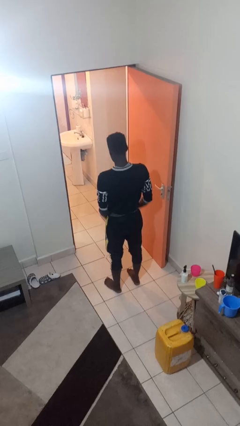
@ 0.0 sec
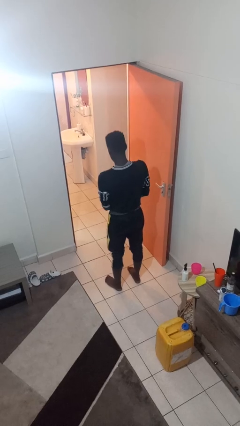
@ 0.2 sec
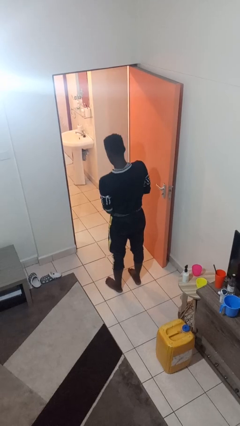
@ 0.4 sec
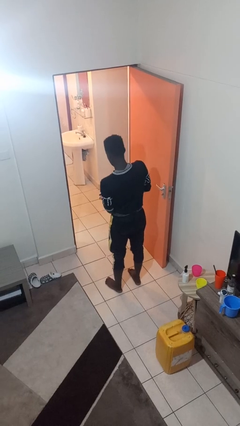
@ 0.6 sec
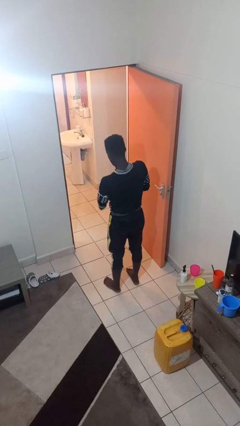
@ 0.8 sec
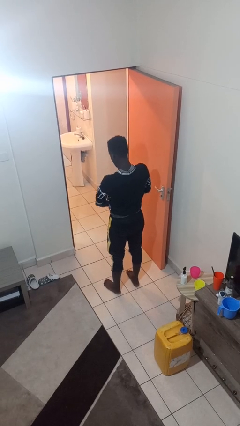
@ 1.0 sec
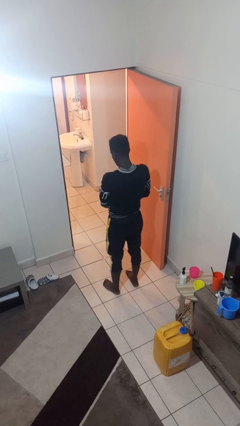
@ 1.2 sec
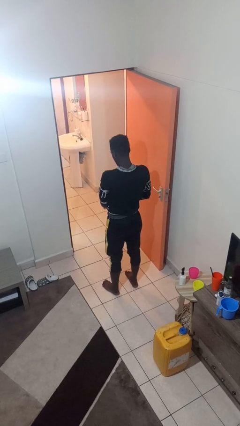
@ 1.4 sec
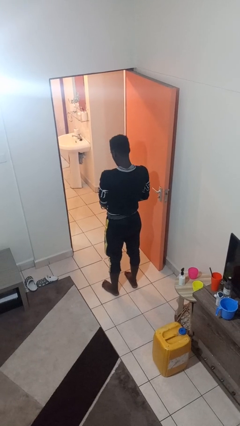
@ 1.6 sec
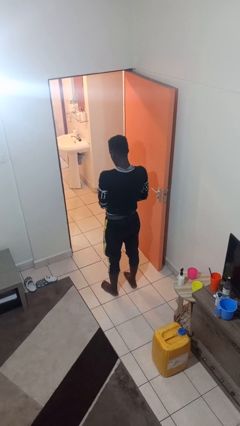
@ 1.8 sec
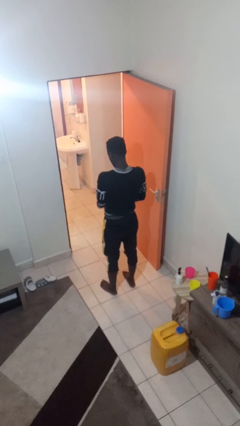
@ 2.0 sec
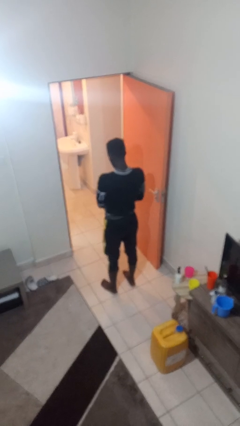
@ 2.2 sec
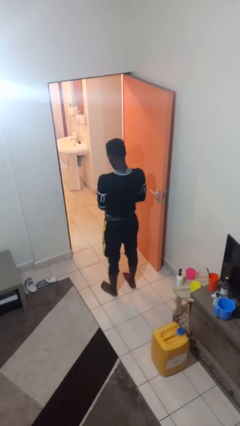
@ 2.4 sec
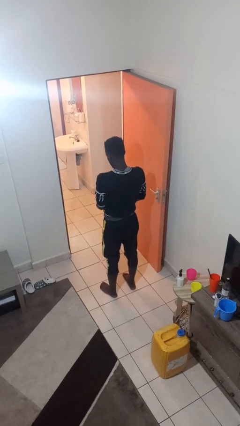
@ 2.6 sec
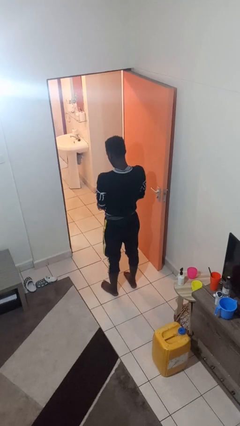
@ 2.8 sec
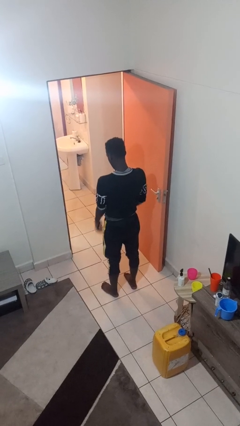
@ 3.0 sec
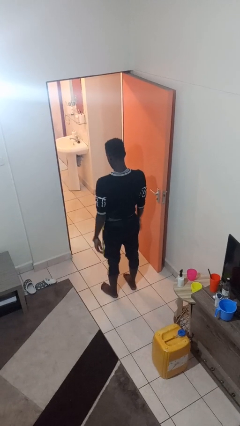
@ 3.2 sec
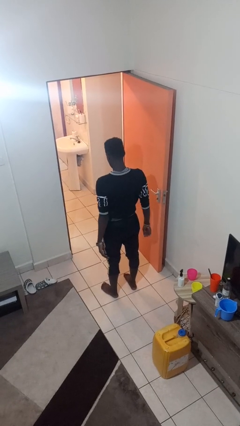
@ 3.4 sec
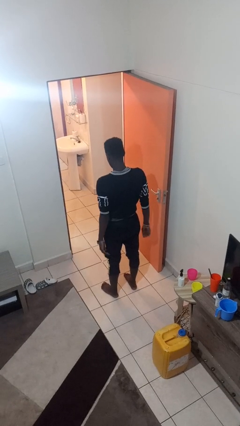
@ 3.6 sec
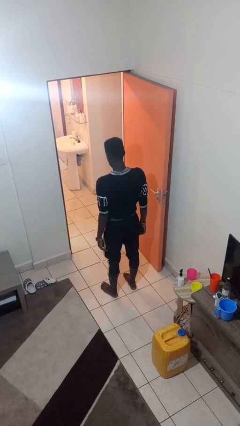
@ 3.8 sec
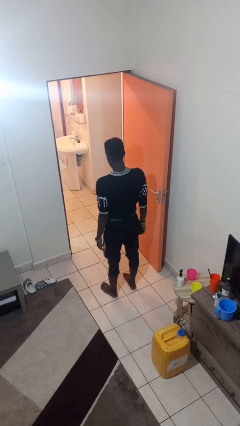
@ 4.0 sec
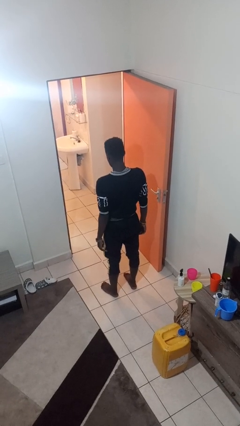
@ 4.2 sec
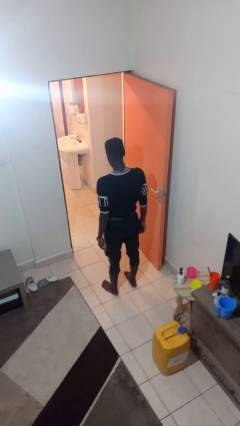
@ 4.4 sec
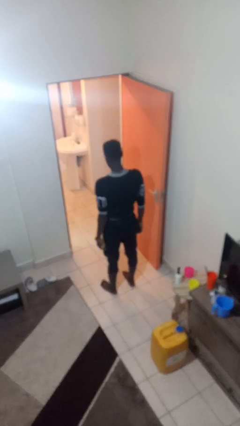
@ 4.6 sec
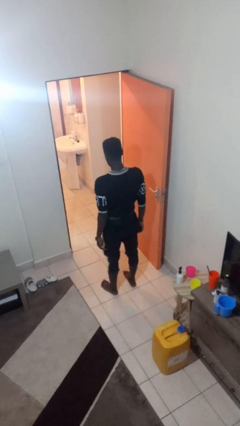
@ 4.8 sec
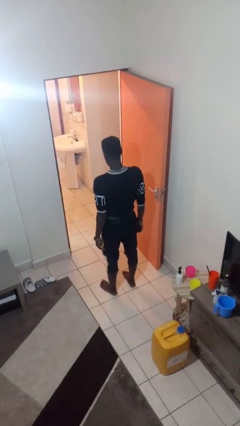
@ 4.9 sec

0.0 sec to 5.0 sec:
person puts on wristwatch

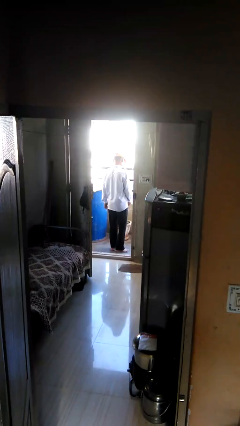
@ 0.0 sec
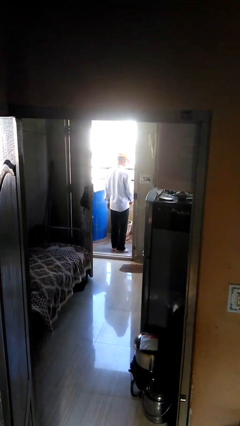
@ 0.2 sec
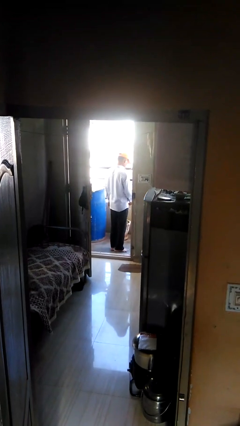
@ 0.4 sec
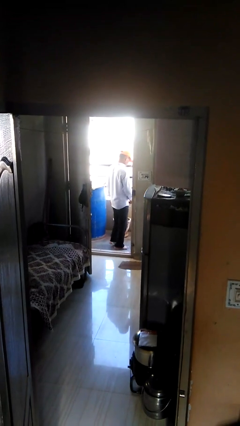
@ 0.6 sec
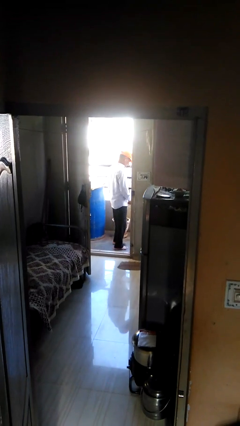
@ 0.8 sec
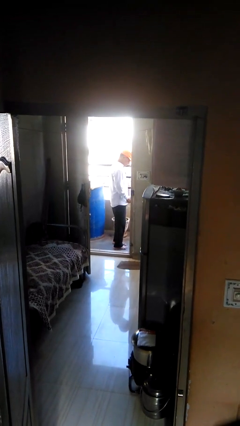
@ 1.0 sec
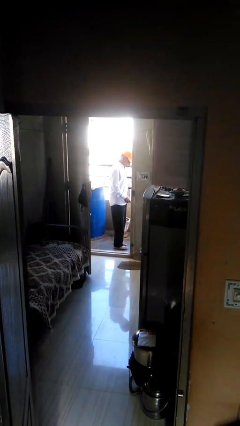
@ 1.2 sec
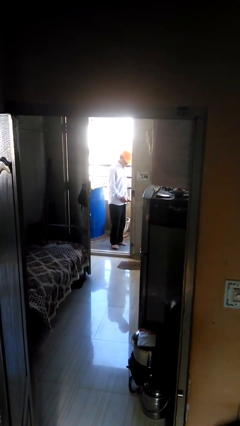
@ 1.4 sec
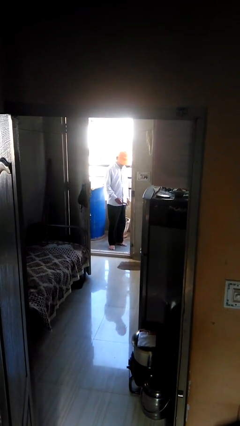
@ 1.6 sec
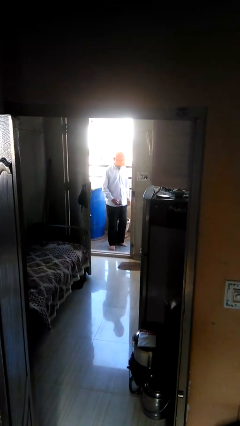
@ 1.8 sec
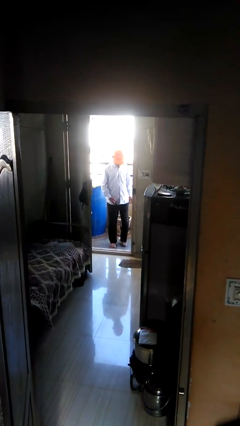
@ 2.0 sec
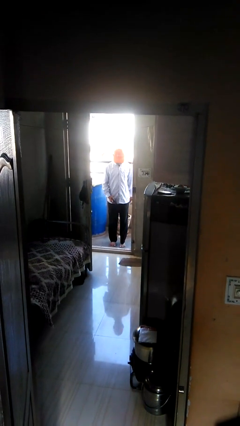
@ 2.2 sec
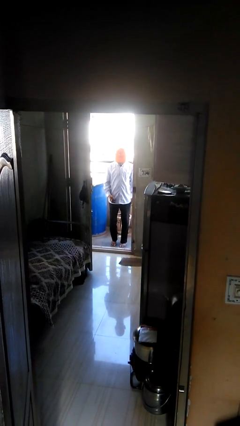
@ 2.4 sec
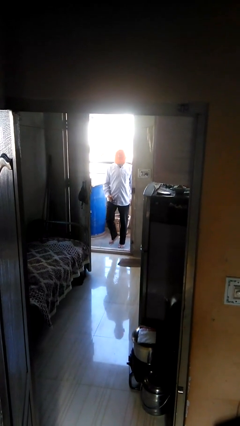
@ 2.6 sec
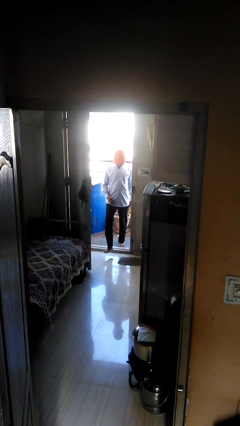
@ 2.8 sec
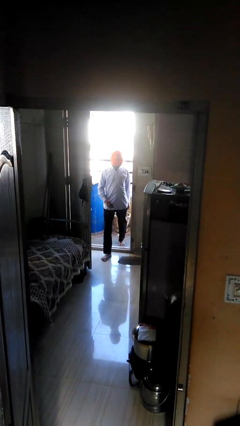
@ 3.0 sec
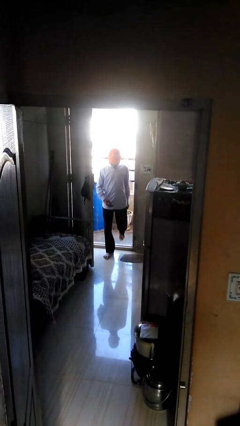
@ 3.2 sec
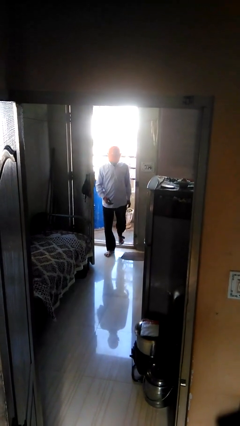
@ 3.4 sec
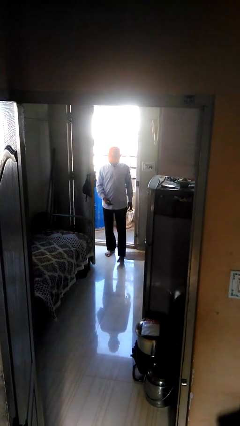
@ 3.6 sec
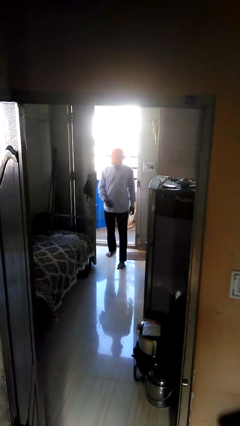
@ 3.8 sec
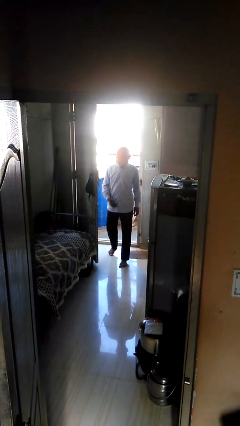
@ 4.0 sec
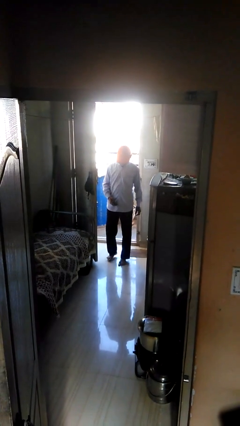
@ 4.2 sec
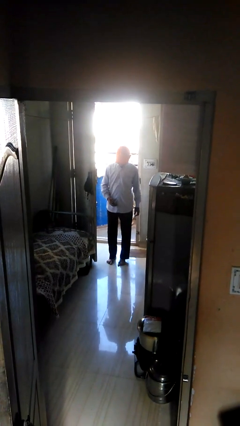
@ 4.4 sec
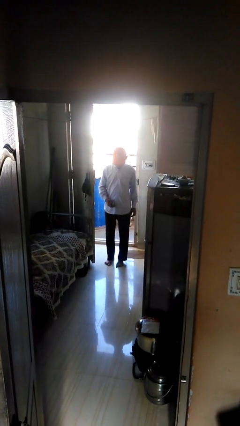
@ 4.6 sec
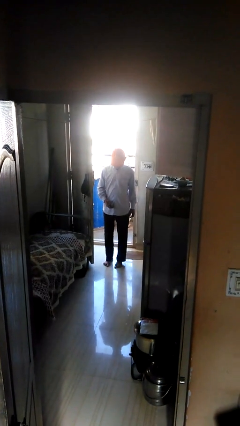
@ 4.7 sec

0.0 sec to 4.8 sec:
person enters scene through structure

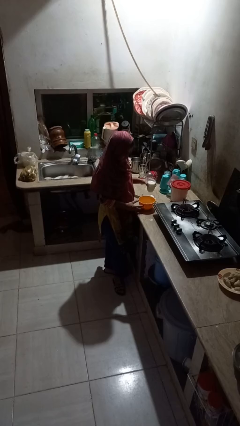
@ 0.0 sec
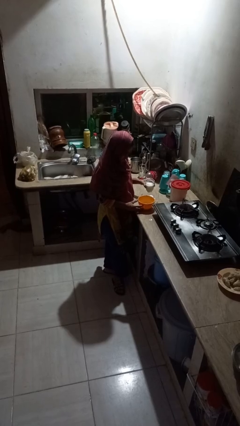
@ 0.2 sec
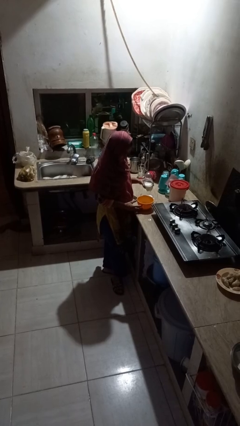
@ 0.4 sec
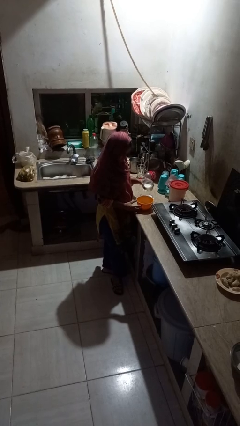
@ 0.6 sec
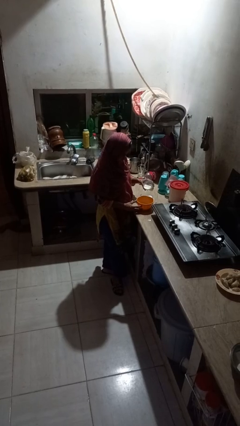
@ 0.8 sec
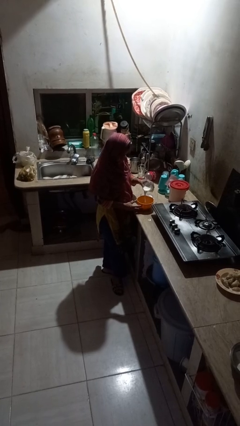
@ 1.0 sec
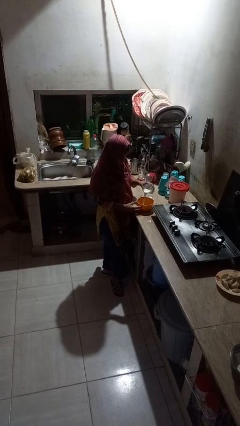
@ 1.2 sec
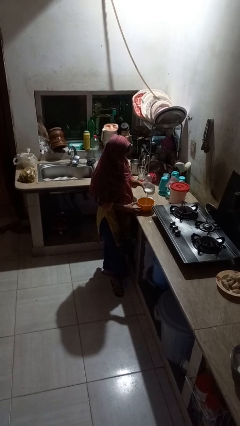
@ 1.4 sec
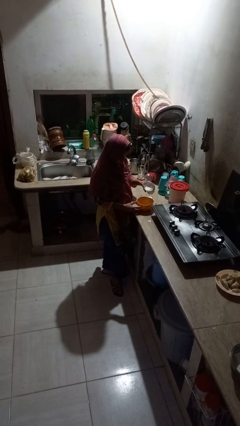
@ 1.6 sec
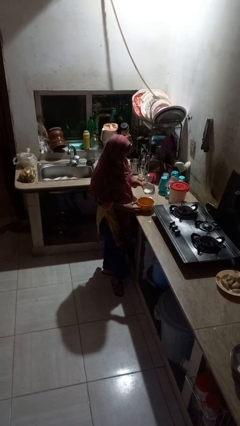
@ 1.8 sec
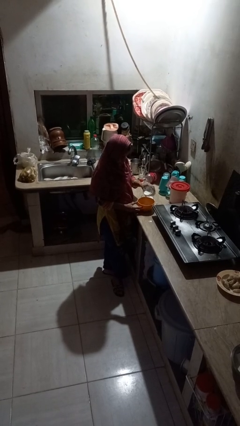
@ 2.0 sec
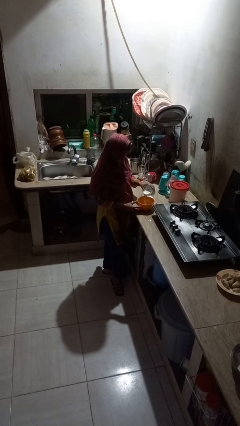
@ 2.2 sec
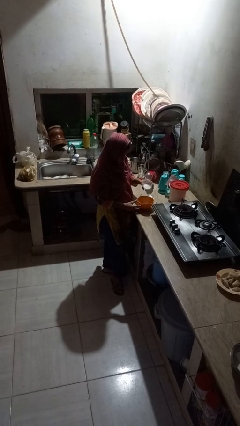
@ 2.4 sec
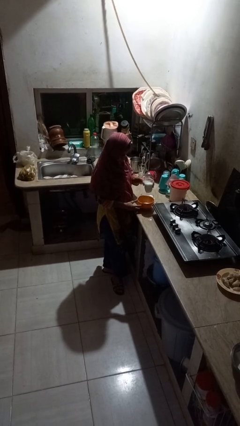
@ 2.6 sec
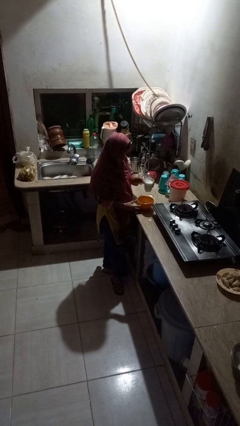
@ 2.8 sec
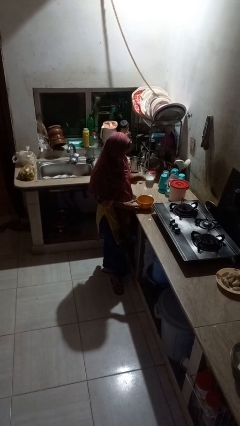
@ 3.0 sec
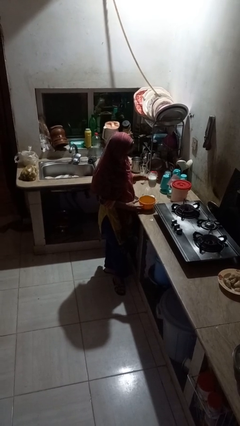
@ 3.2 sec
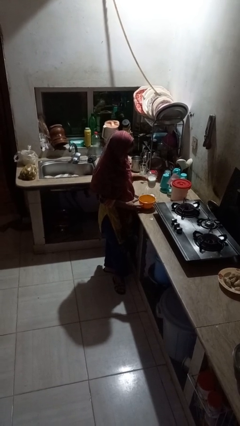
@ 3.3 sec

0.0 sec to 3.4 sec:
person pours into bowl

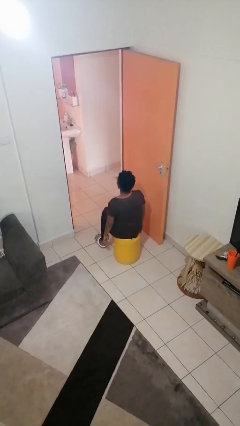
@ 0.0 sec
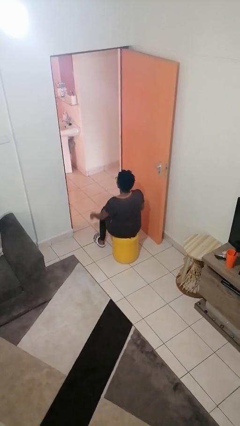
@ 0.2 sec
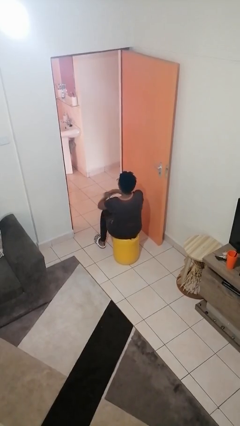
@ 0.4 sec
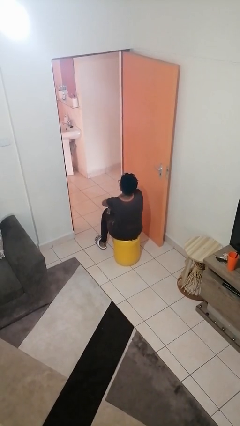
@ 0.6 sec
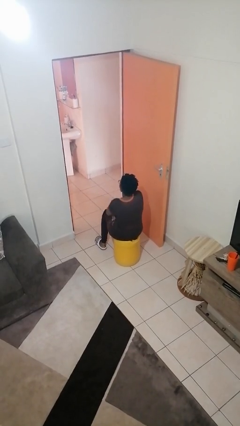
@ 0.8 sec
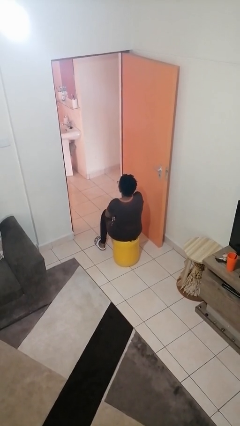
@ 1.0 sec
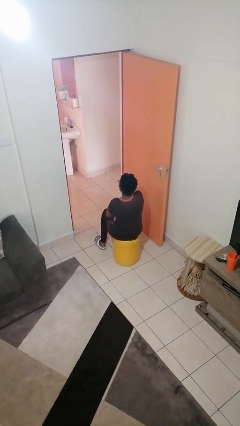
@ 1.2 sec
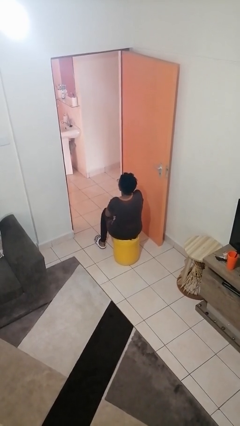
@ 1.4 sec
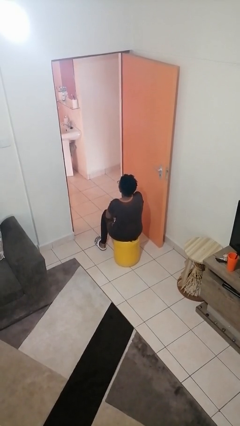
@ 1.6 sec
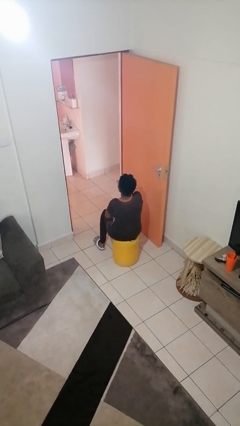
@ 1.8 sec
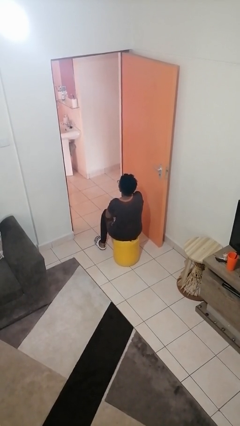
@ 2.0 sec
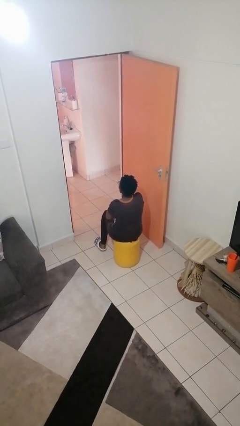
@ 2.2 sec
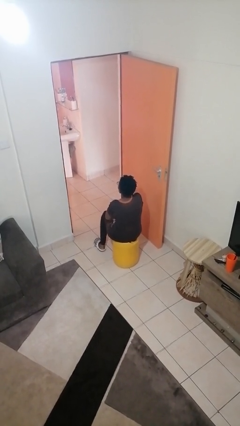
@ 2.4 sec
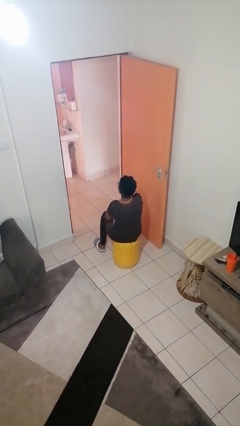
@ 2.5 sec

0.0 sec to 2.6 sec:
person crosses arms

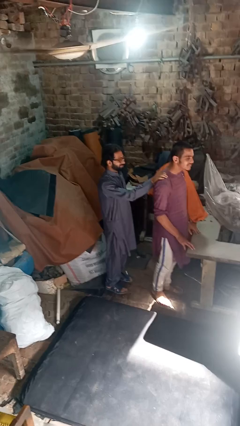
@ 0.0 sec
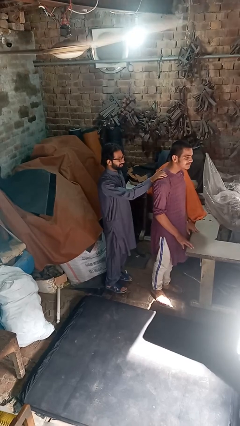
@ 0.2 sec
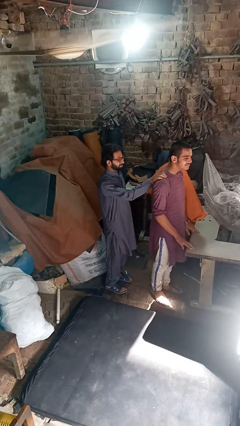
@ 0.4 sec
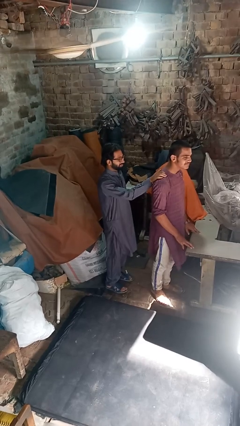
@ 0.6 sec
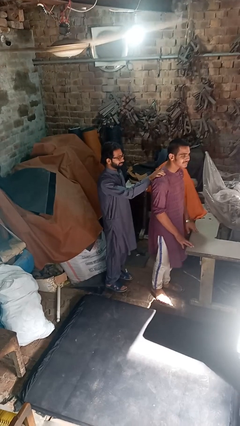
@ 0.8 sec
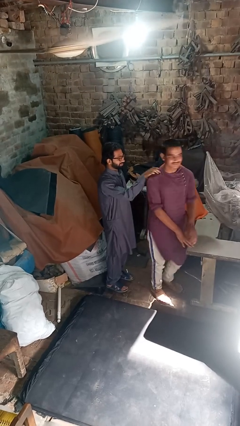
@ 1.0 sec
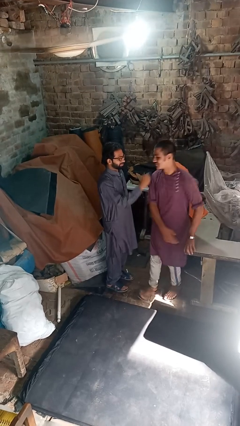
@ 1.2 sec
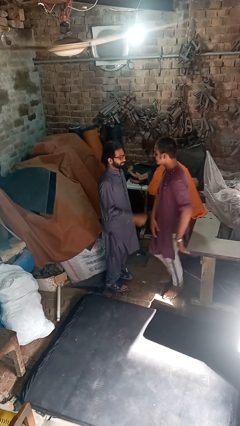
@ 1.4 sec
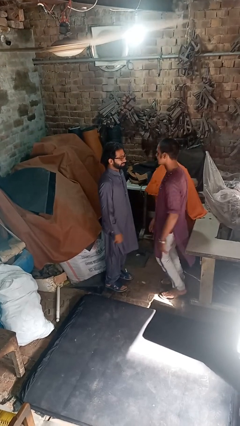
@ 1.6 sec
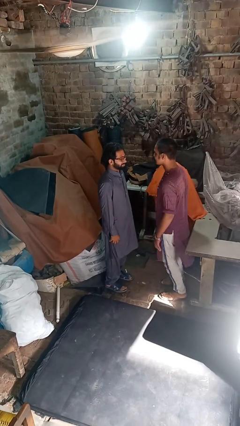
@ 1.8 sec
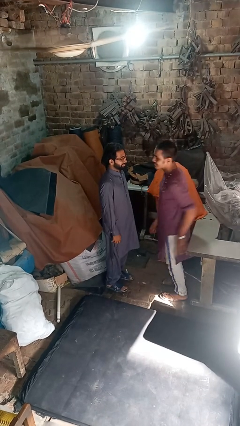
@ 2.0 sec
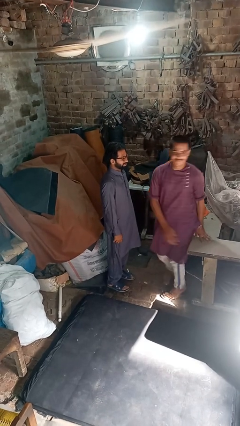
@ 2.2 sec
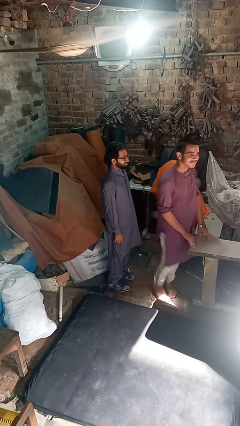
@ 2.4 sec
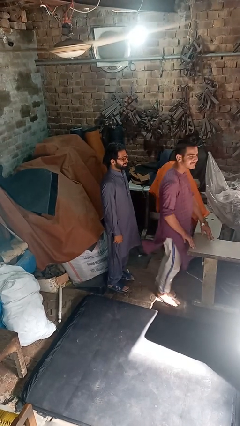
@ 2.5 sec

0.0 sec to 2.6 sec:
person spins person around
